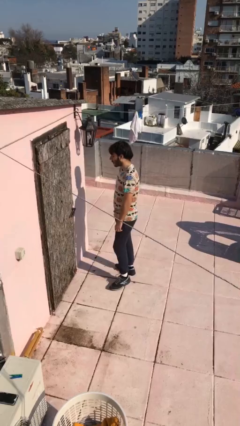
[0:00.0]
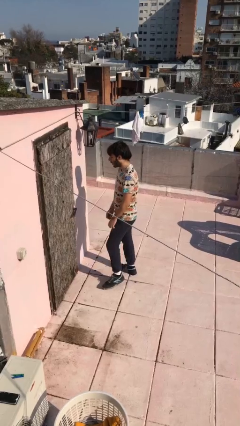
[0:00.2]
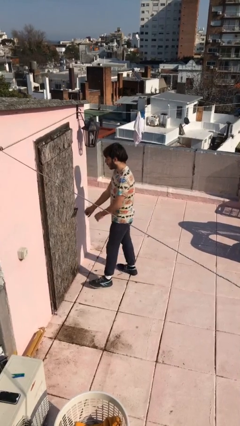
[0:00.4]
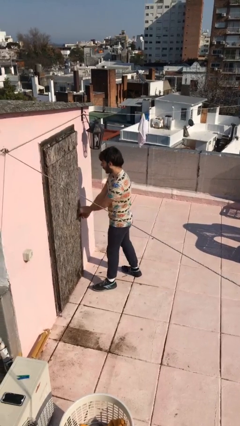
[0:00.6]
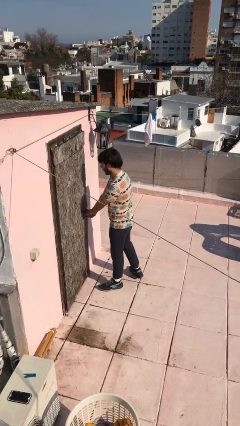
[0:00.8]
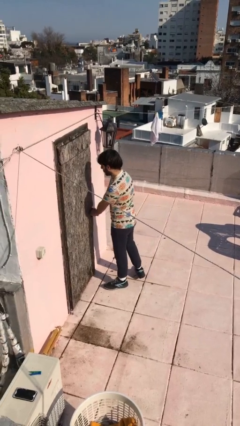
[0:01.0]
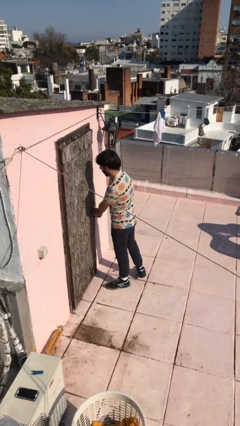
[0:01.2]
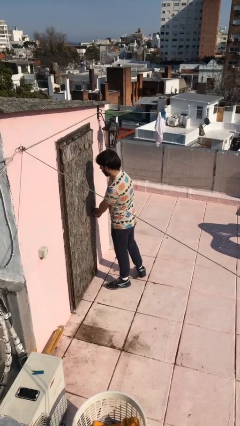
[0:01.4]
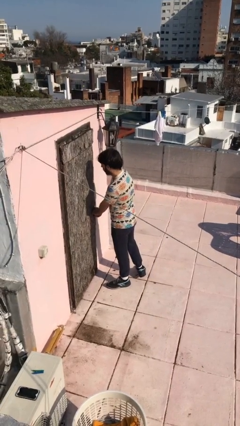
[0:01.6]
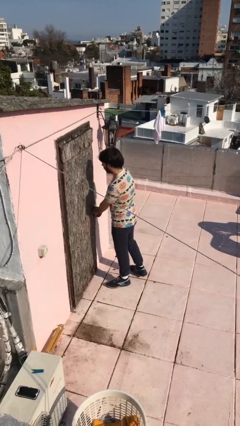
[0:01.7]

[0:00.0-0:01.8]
person unlocks door with keys

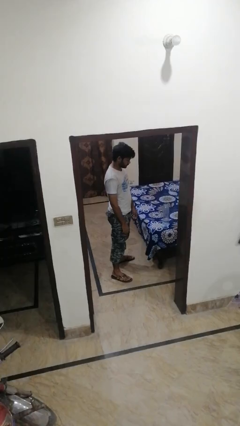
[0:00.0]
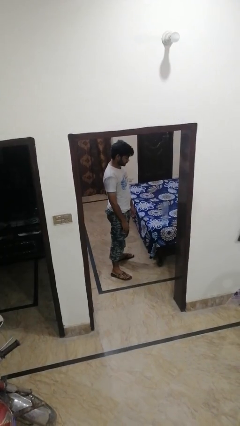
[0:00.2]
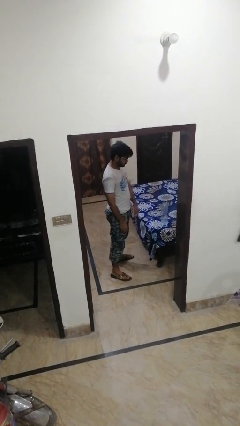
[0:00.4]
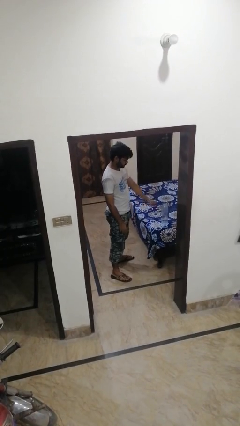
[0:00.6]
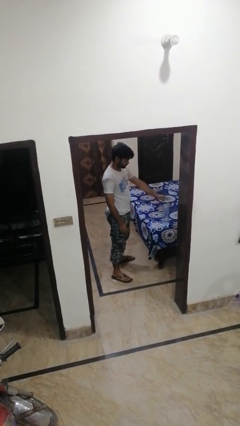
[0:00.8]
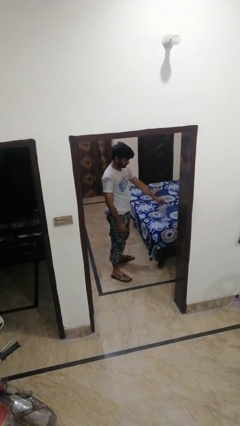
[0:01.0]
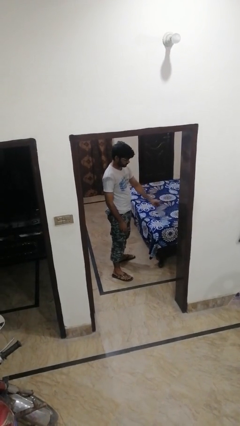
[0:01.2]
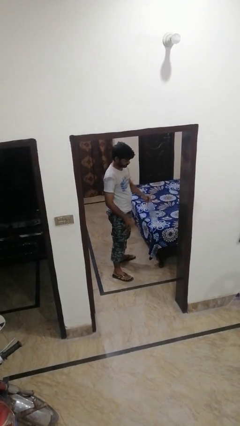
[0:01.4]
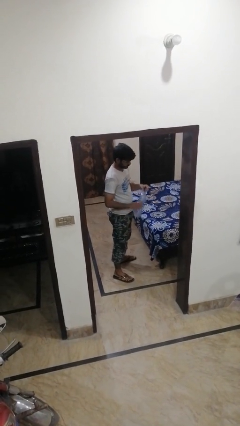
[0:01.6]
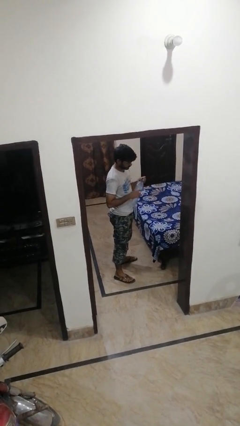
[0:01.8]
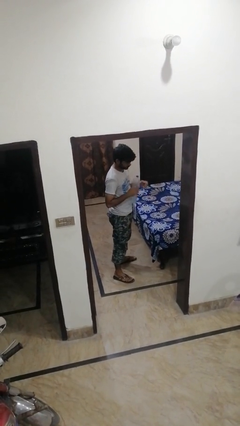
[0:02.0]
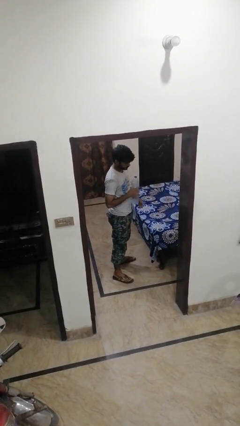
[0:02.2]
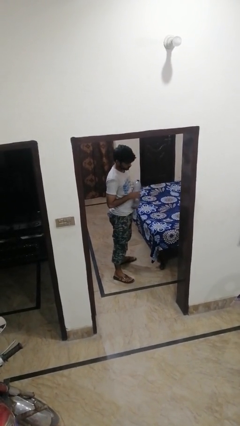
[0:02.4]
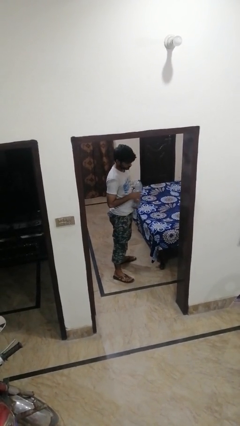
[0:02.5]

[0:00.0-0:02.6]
person picks up object from bed

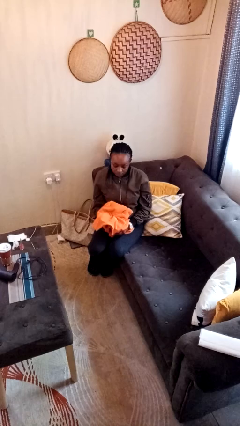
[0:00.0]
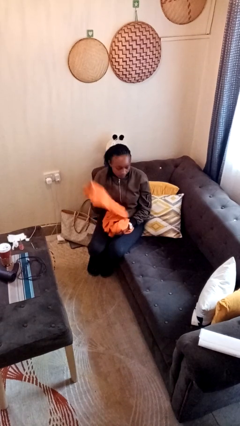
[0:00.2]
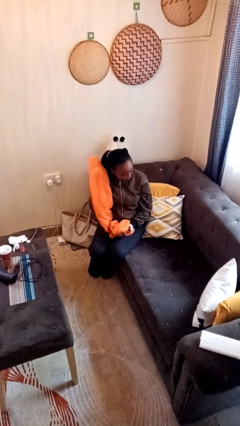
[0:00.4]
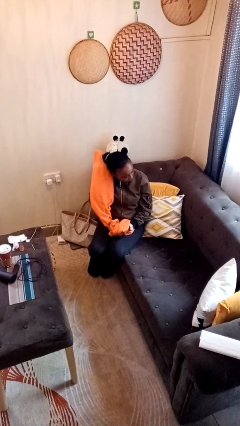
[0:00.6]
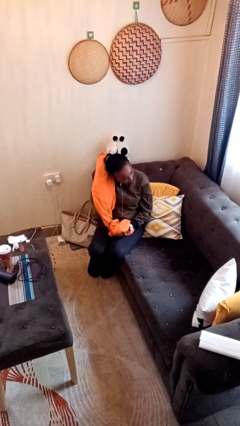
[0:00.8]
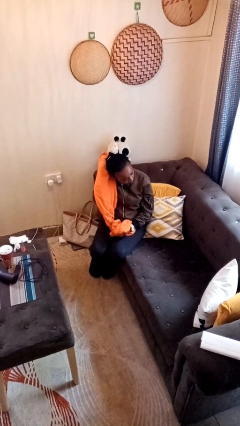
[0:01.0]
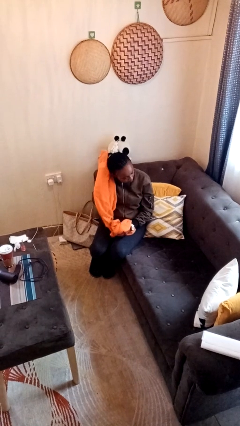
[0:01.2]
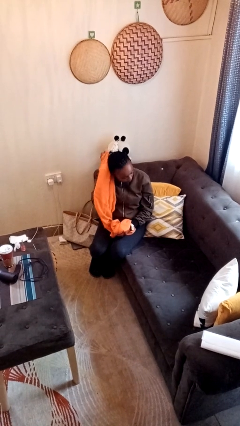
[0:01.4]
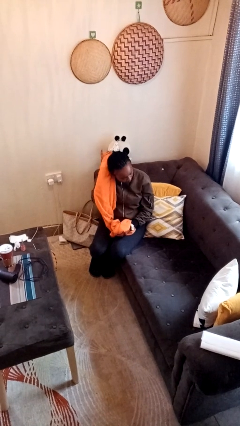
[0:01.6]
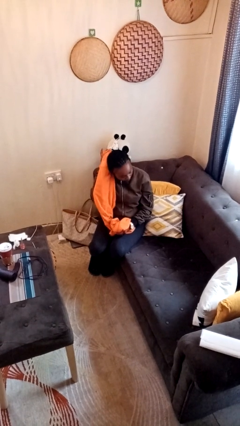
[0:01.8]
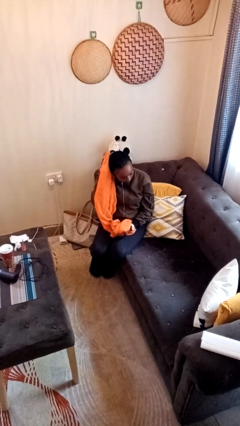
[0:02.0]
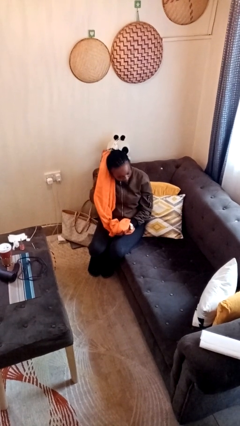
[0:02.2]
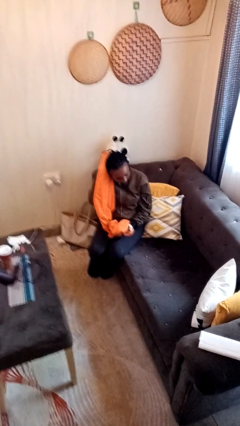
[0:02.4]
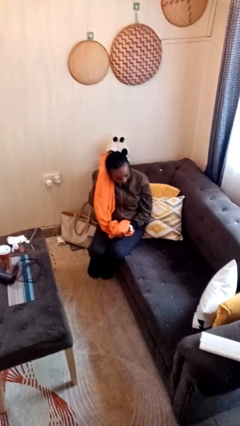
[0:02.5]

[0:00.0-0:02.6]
person dries hair with towel

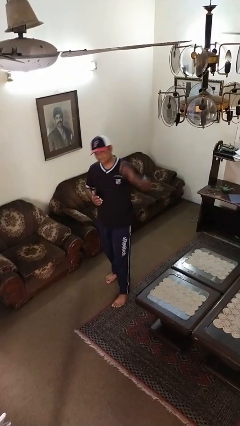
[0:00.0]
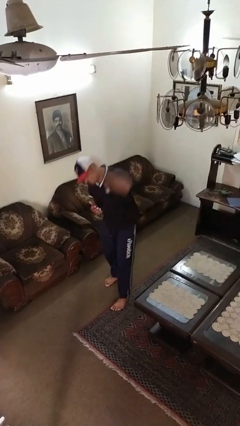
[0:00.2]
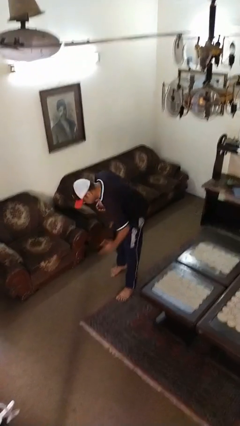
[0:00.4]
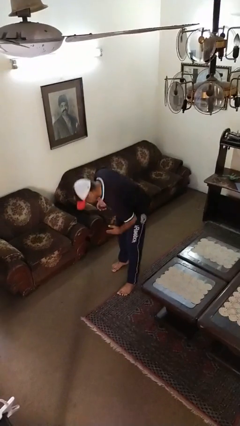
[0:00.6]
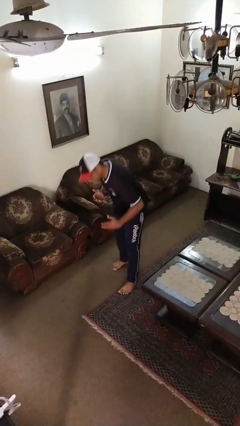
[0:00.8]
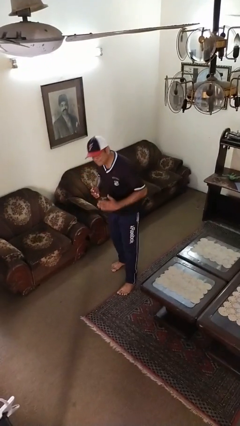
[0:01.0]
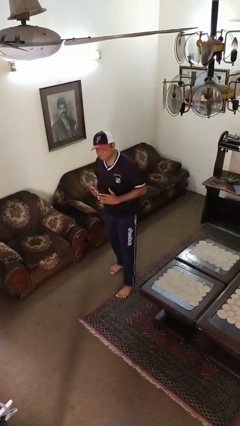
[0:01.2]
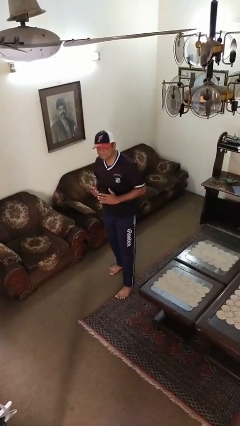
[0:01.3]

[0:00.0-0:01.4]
person karate chop

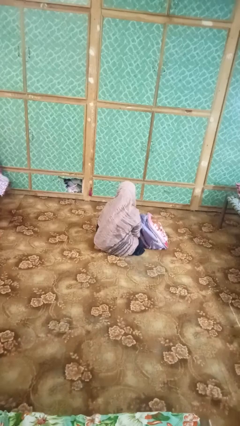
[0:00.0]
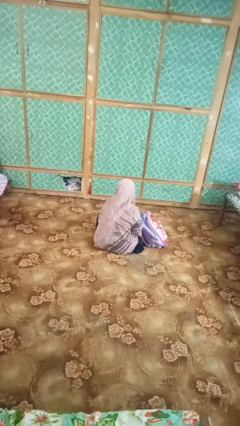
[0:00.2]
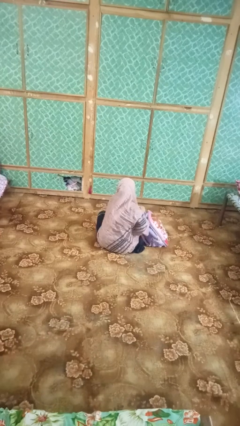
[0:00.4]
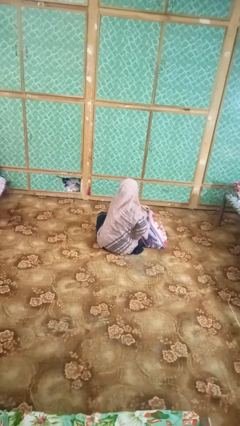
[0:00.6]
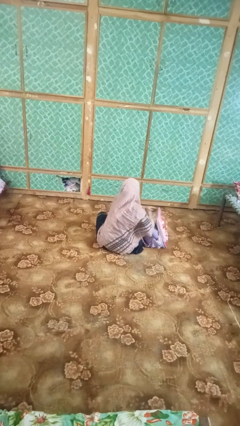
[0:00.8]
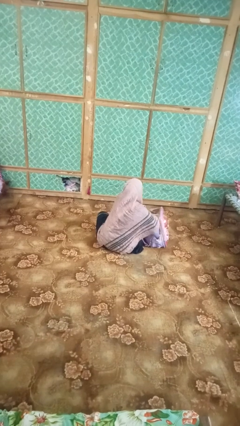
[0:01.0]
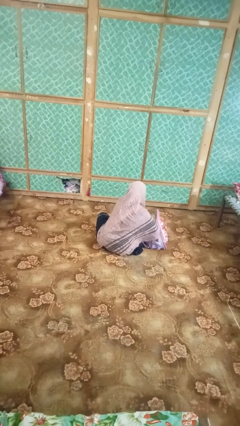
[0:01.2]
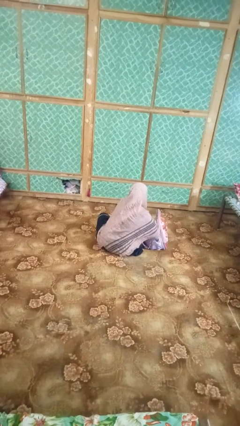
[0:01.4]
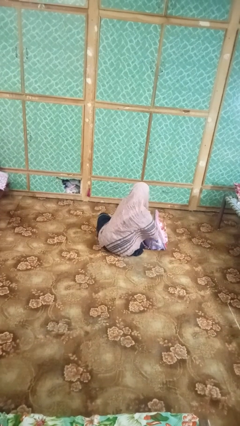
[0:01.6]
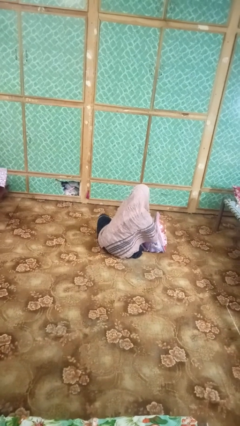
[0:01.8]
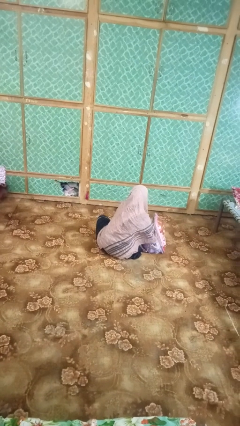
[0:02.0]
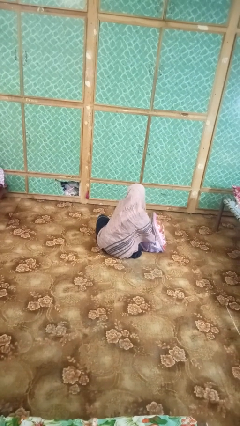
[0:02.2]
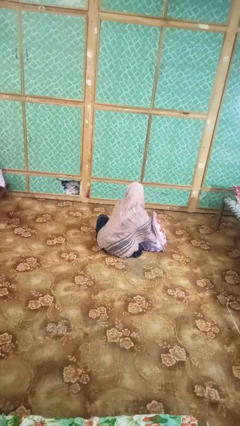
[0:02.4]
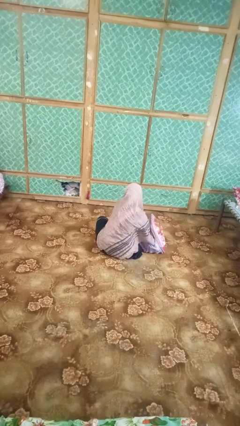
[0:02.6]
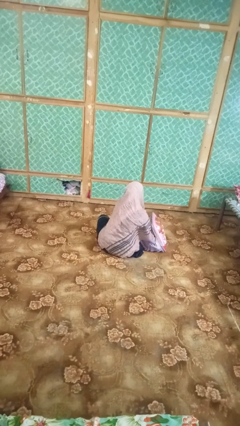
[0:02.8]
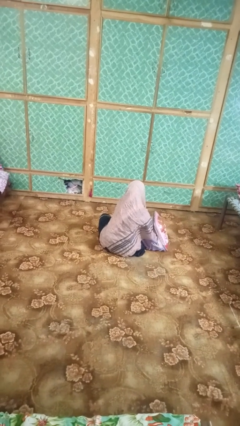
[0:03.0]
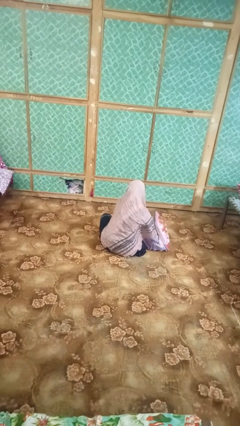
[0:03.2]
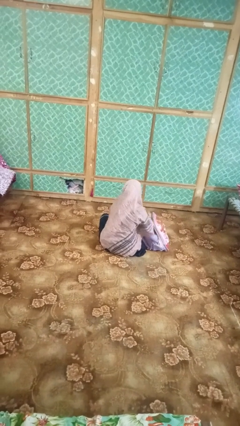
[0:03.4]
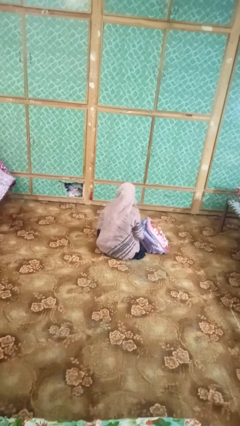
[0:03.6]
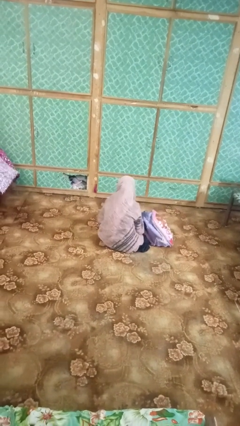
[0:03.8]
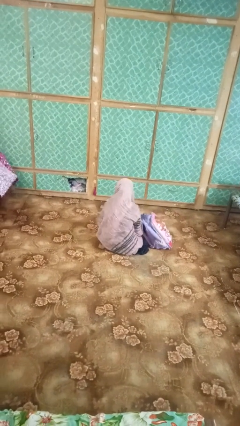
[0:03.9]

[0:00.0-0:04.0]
person searches in bag

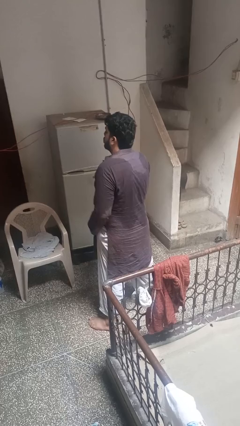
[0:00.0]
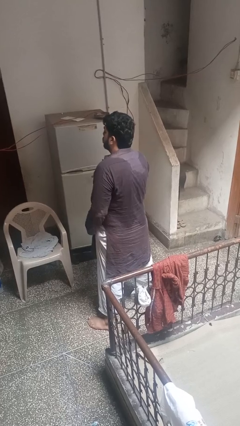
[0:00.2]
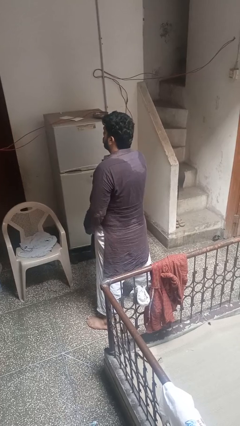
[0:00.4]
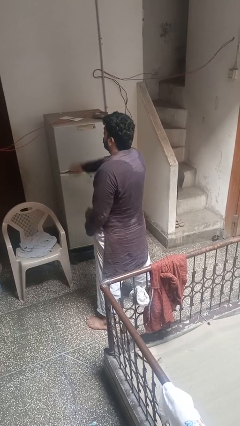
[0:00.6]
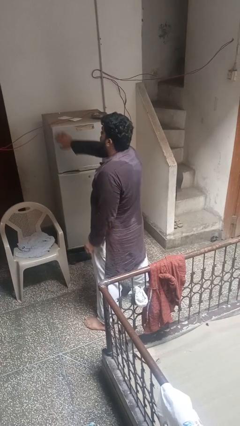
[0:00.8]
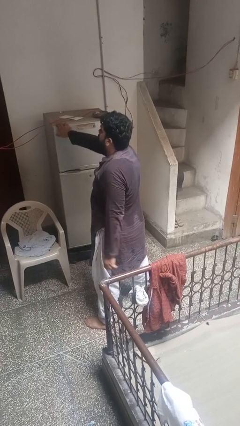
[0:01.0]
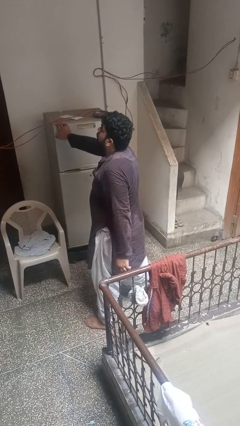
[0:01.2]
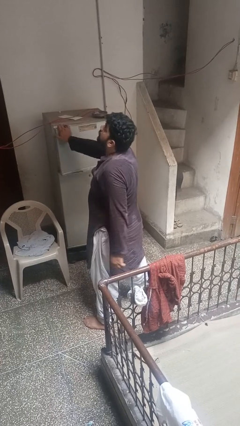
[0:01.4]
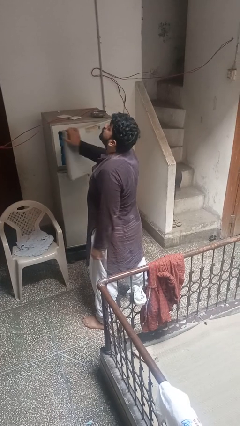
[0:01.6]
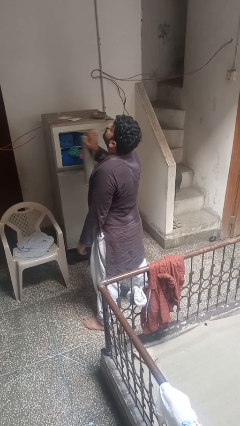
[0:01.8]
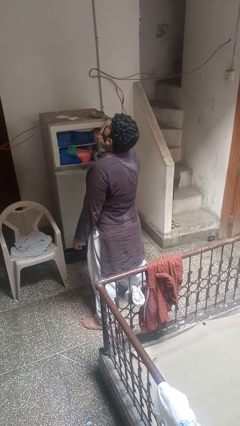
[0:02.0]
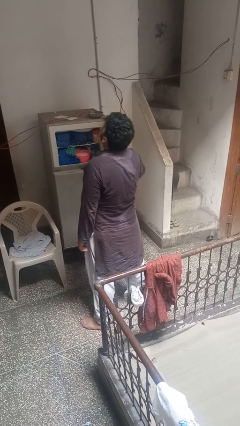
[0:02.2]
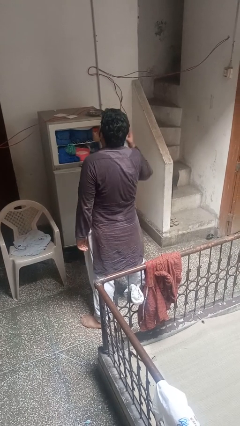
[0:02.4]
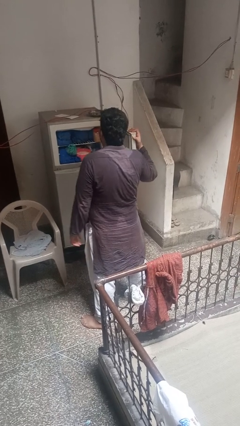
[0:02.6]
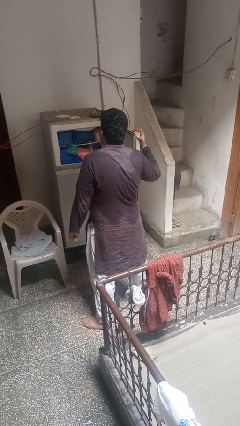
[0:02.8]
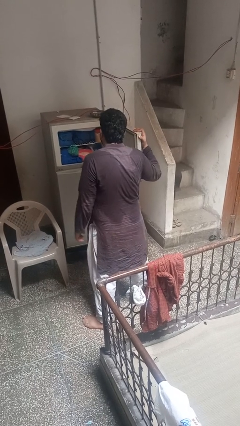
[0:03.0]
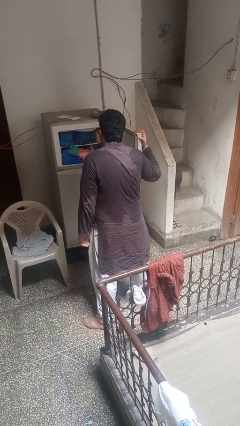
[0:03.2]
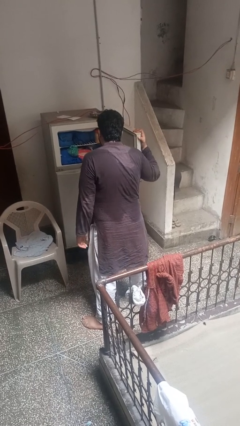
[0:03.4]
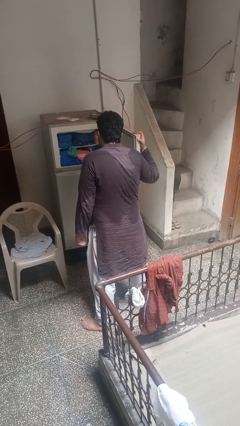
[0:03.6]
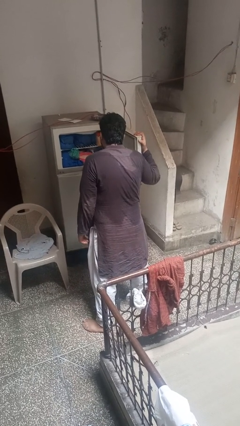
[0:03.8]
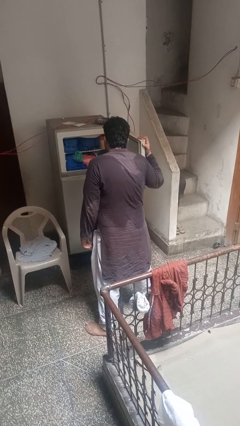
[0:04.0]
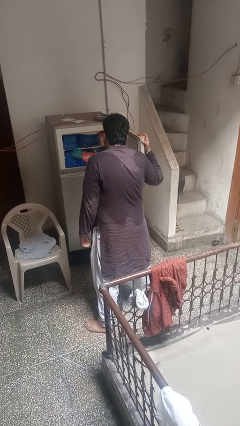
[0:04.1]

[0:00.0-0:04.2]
person opens refrigerator

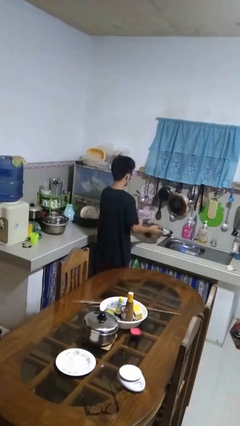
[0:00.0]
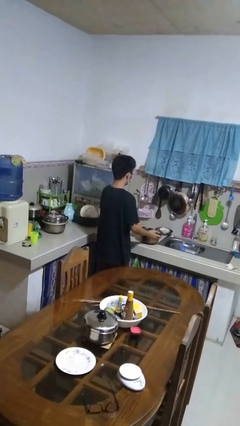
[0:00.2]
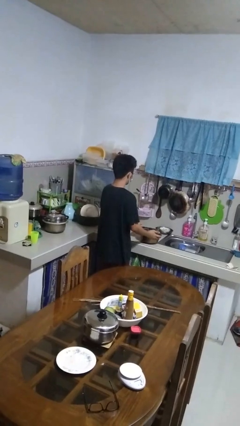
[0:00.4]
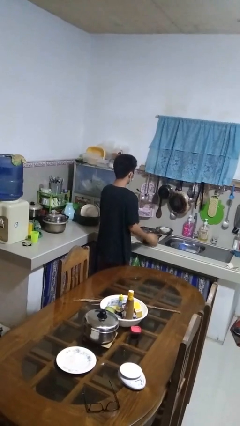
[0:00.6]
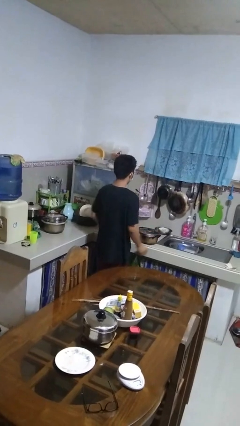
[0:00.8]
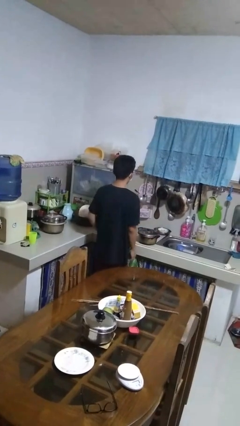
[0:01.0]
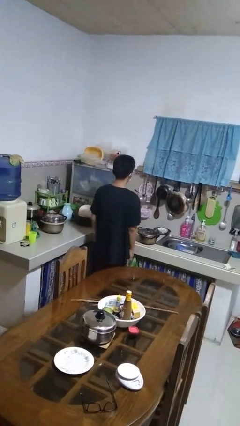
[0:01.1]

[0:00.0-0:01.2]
person puts down object on countertop
